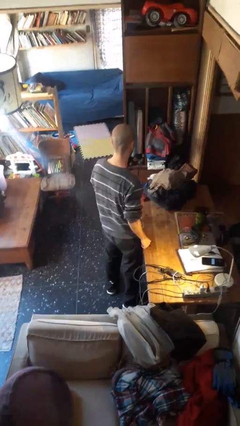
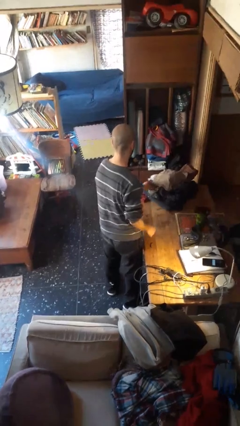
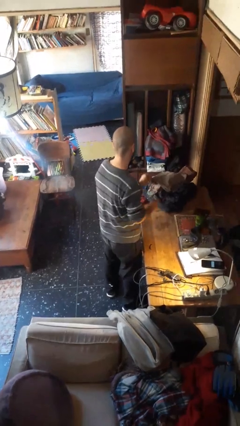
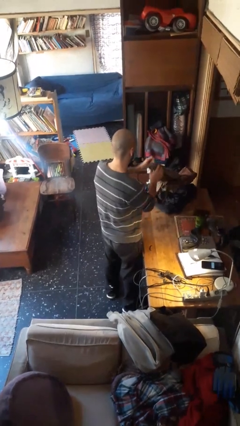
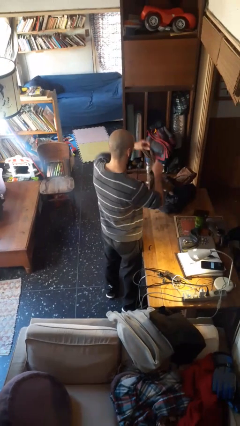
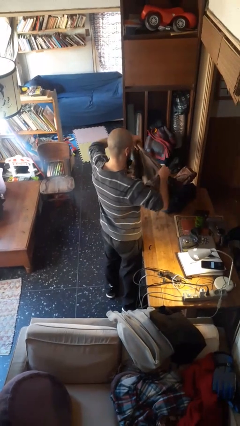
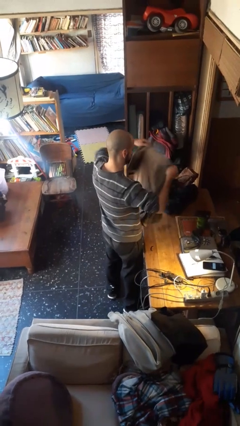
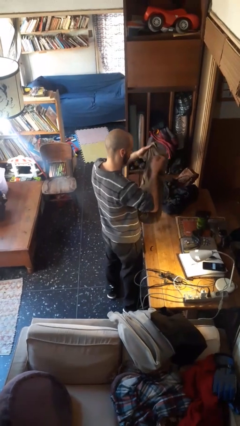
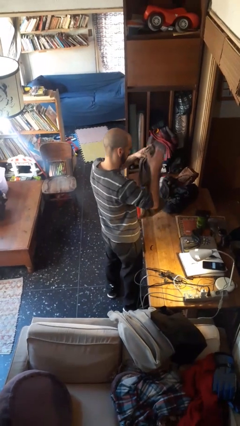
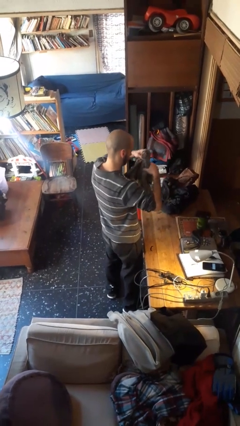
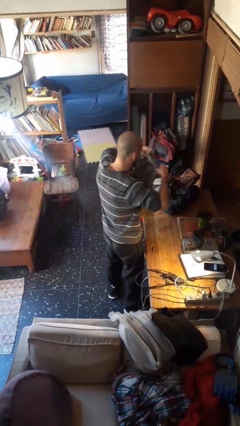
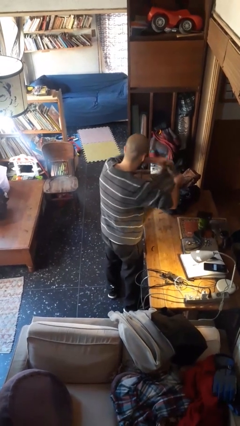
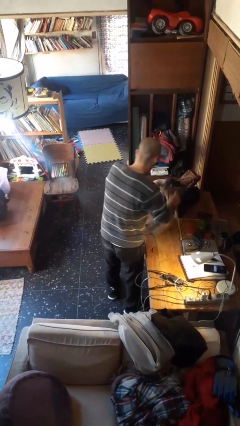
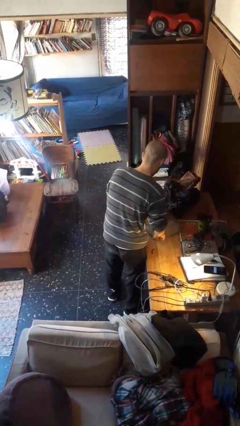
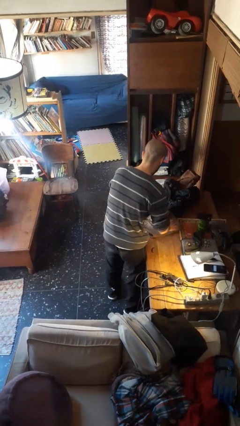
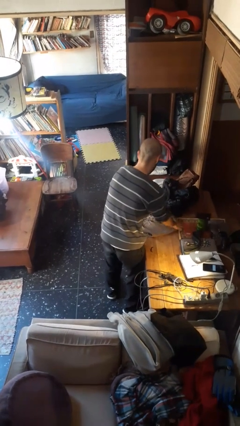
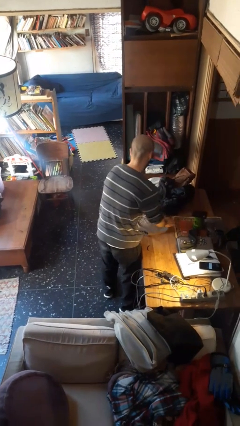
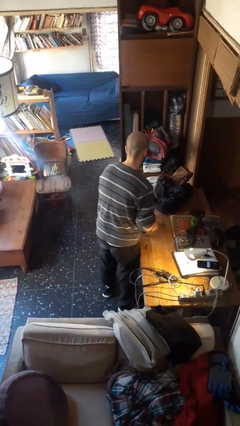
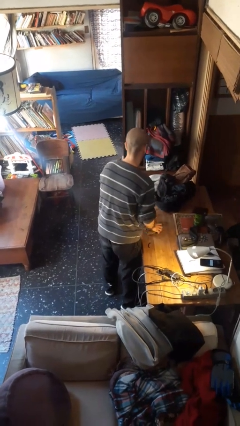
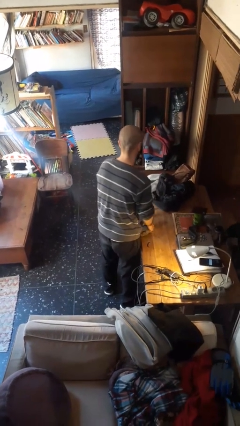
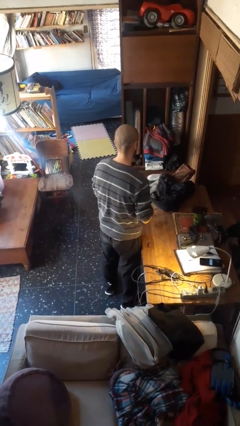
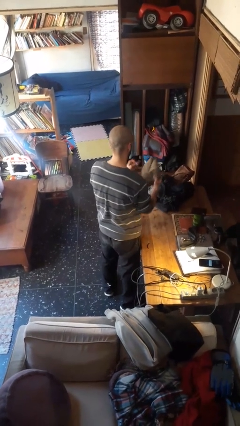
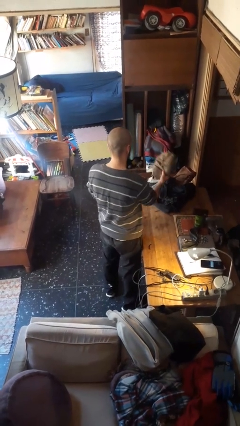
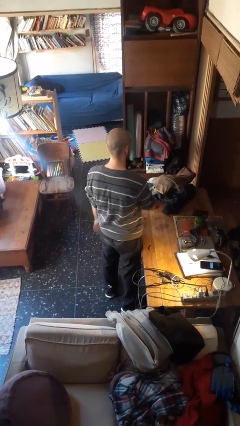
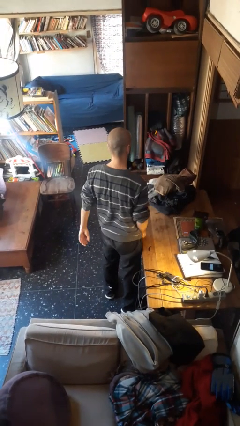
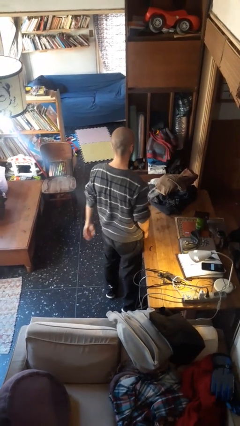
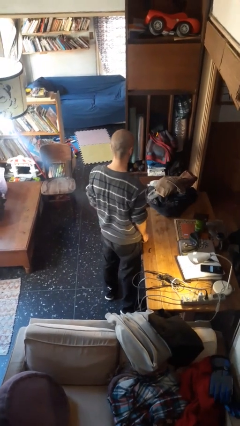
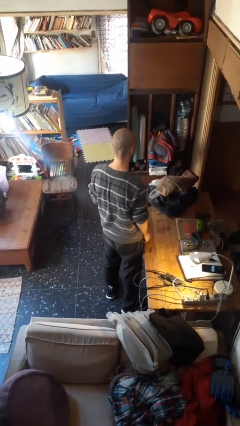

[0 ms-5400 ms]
person folds shirt

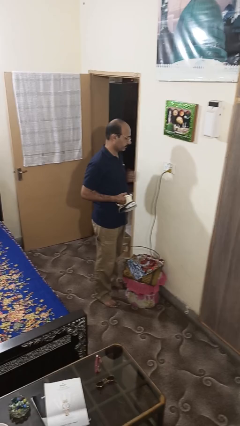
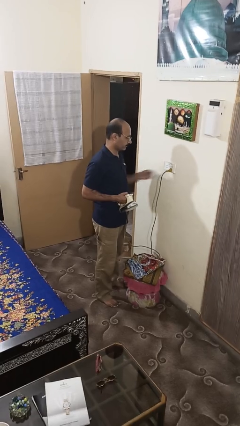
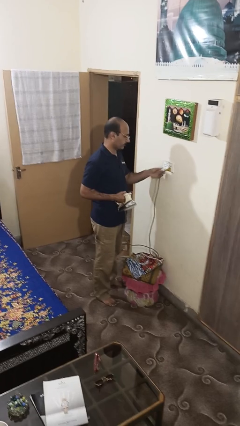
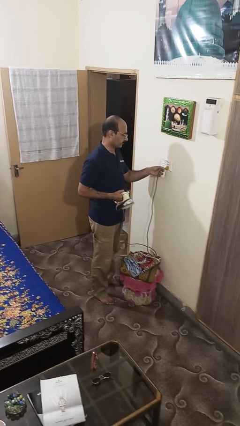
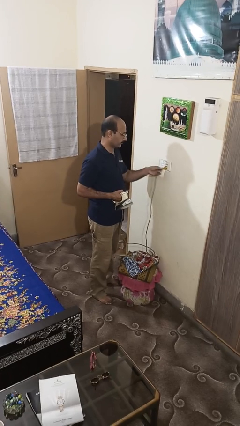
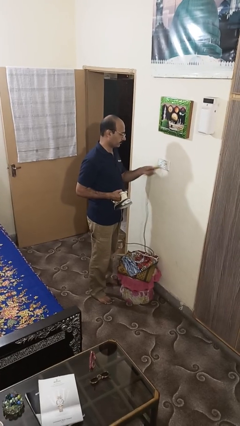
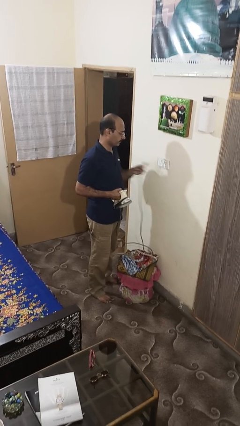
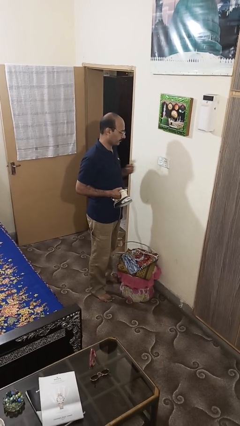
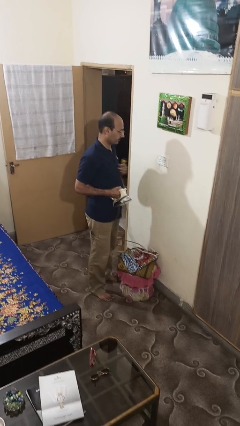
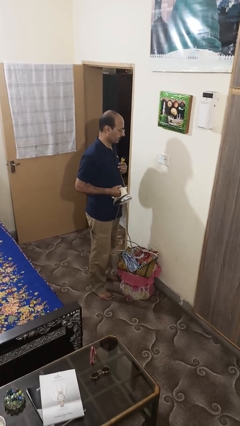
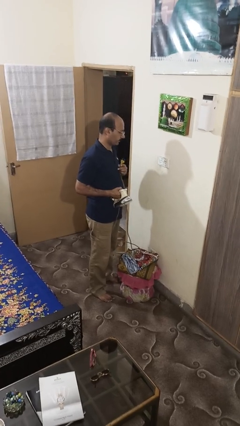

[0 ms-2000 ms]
person unplugs from electrical socket

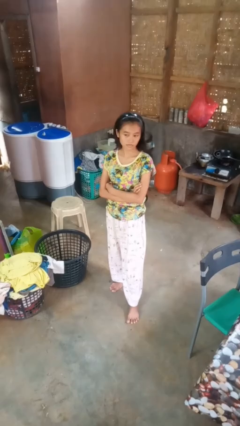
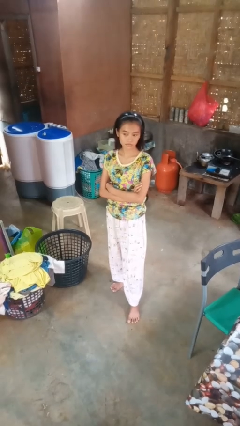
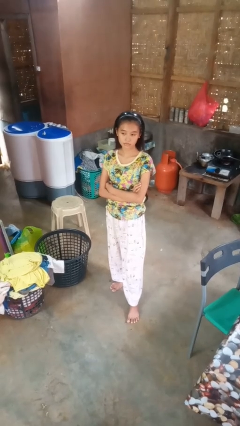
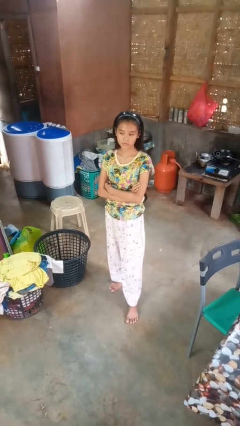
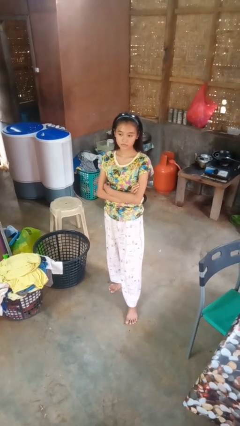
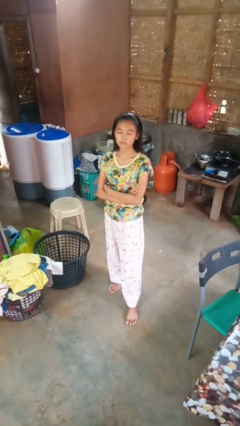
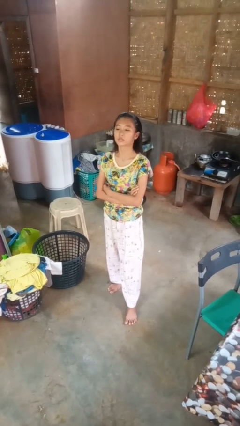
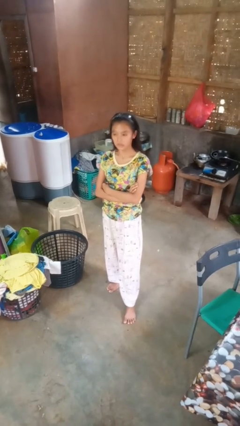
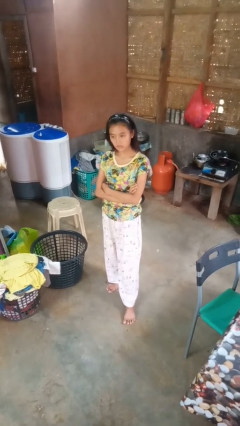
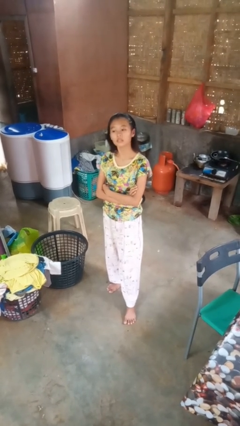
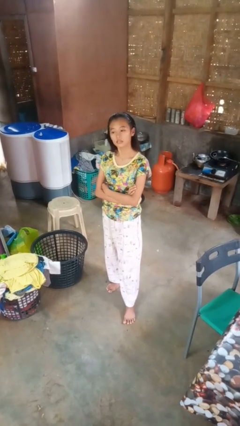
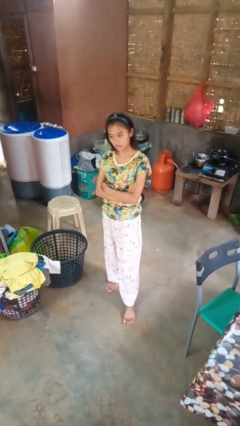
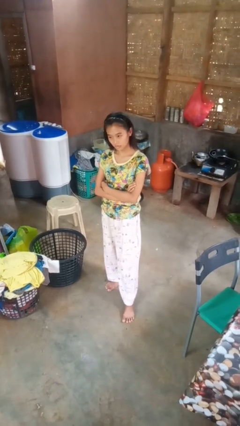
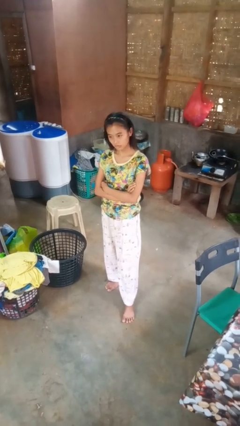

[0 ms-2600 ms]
person nods head

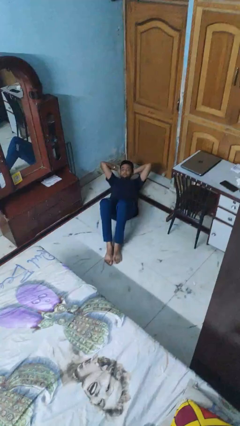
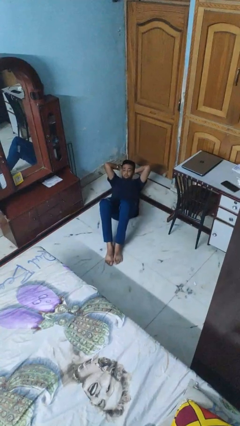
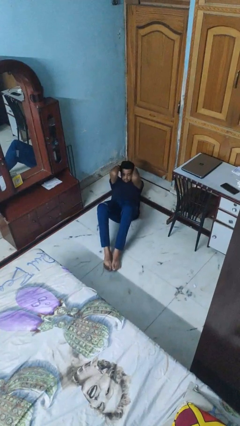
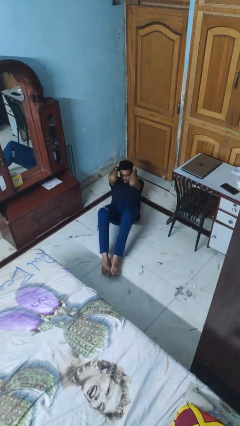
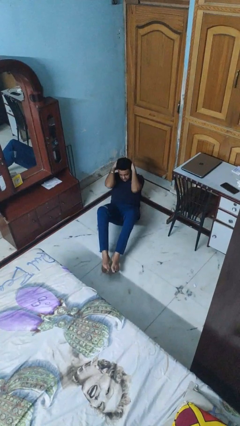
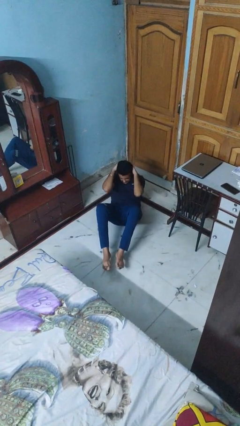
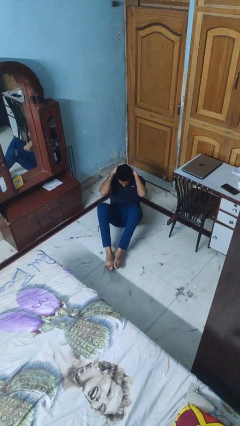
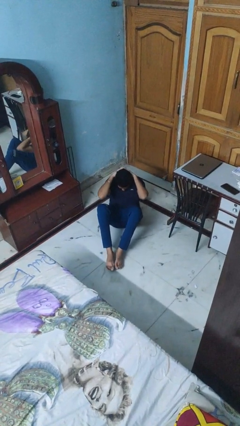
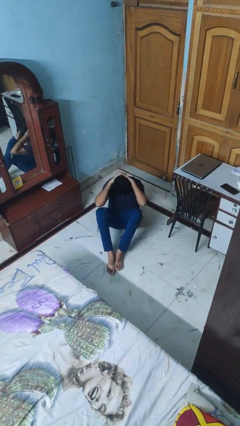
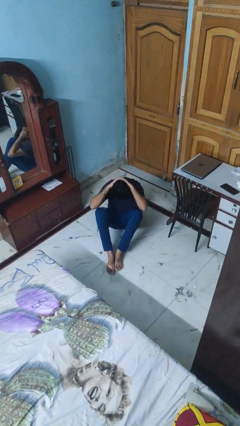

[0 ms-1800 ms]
person exercises with situp

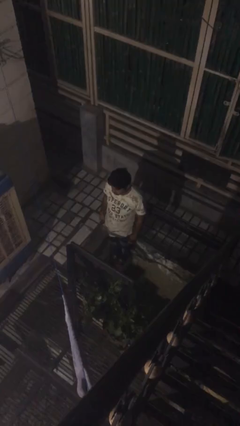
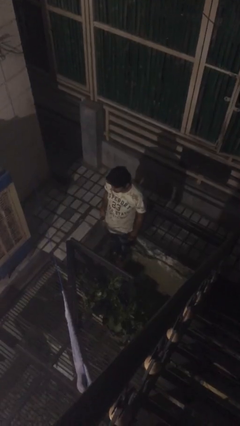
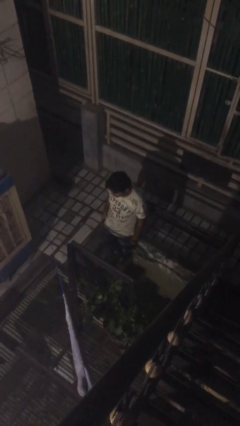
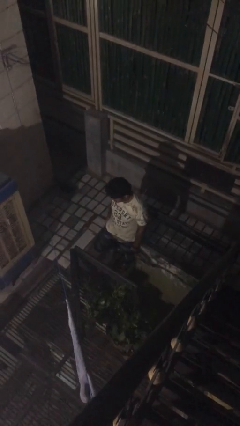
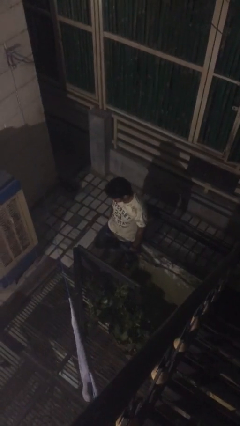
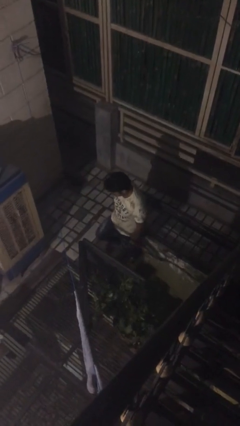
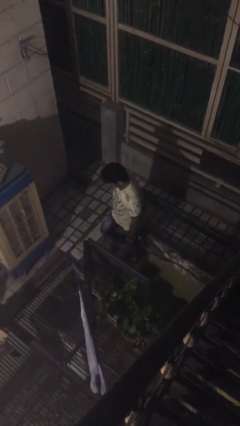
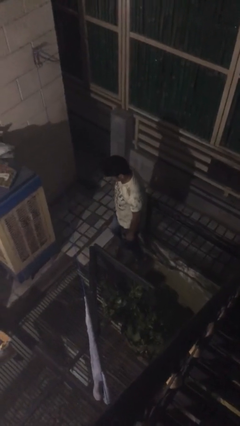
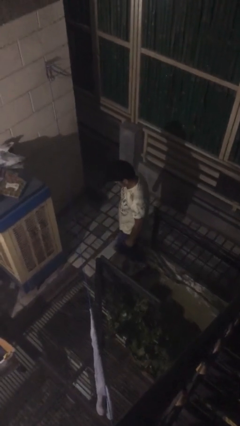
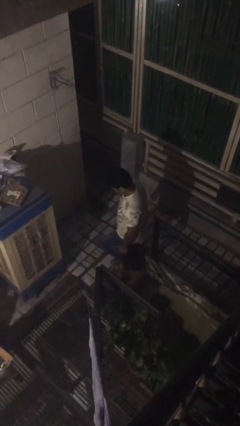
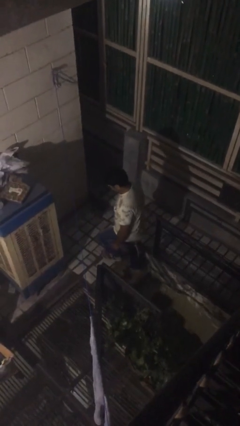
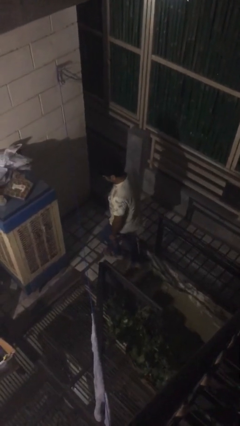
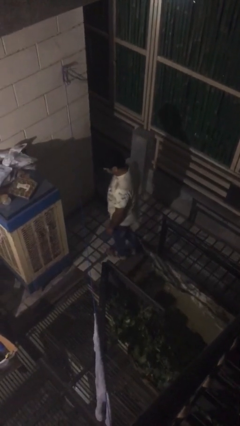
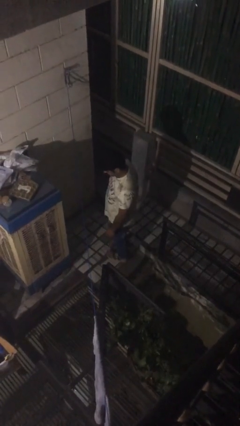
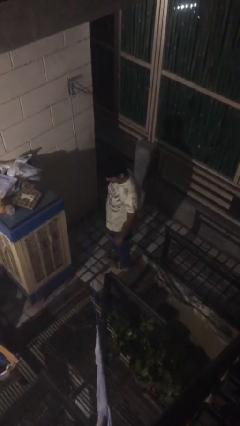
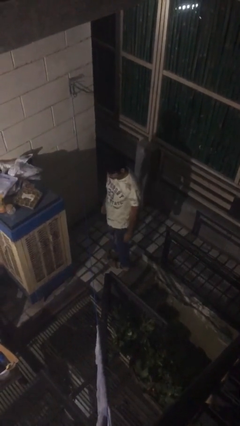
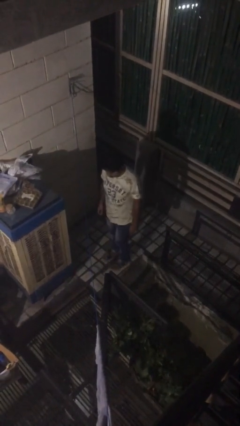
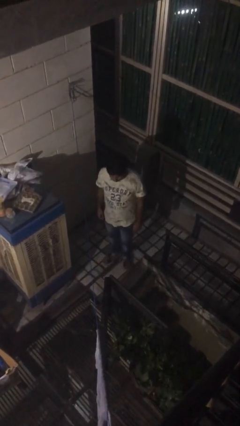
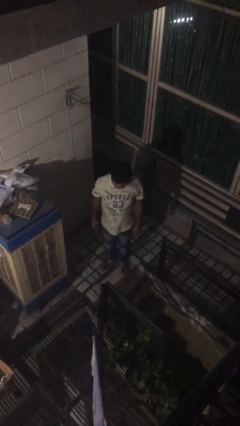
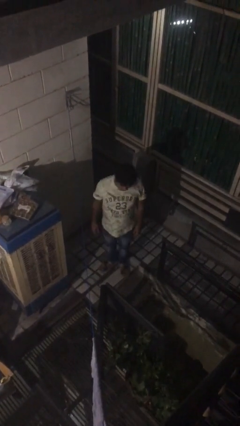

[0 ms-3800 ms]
person climbs up stairs

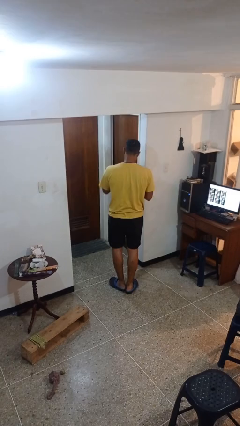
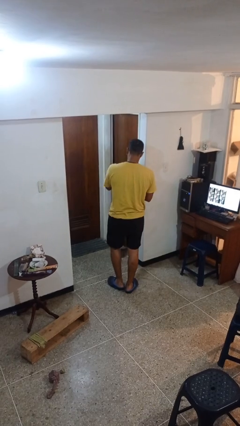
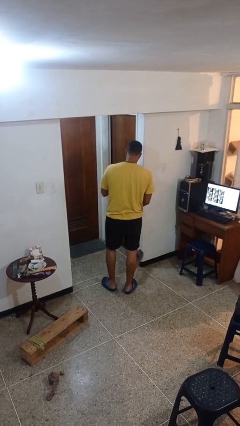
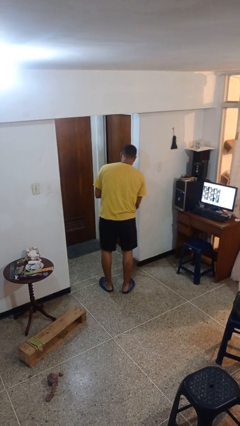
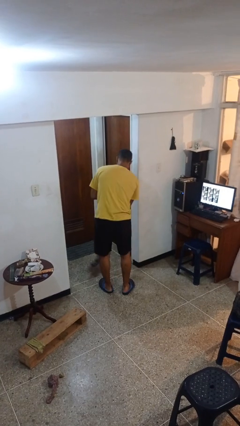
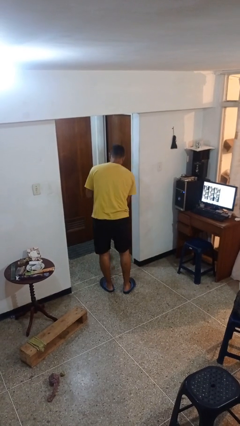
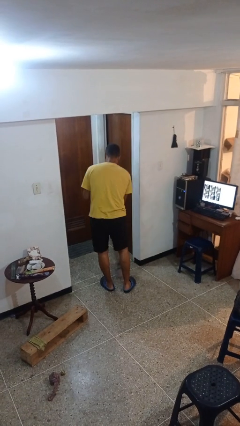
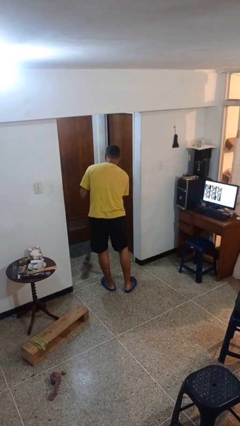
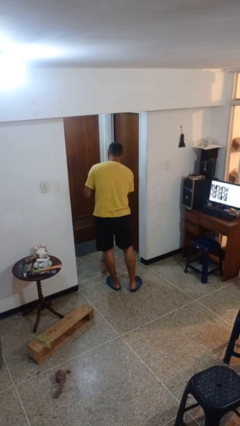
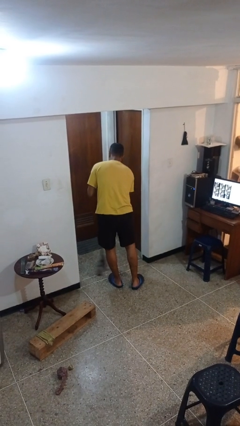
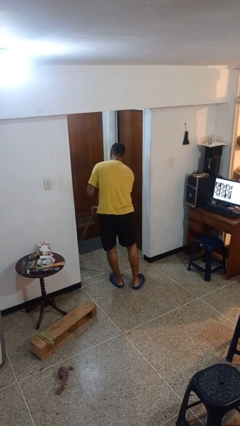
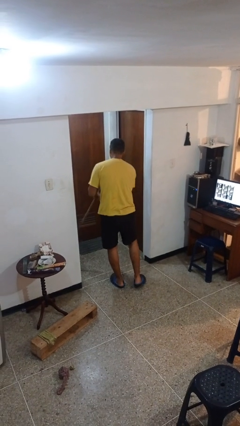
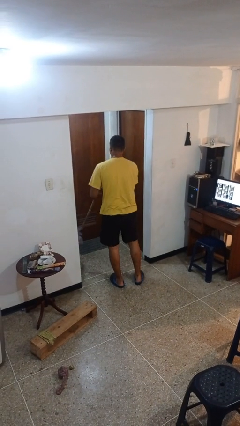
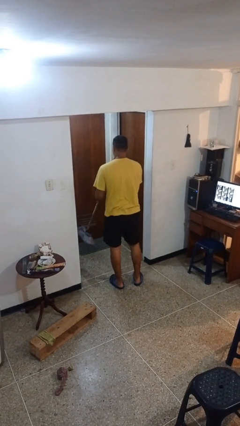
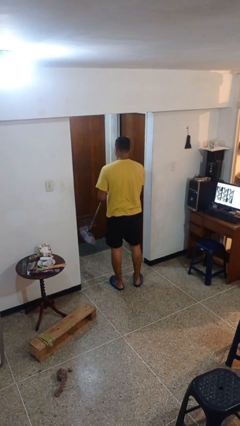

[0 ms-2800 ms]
person sweeps floor
